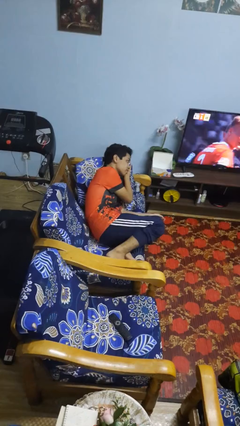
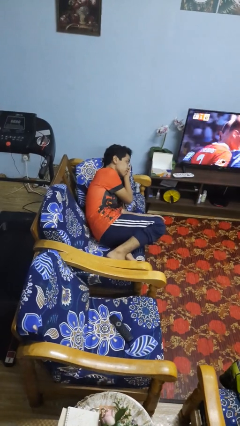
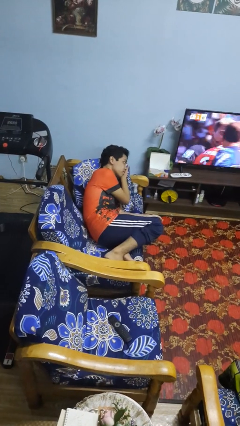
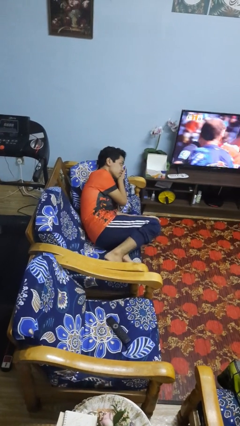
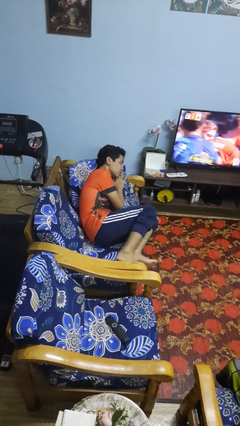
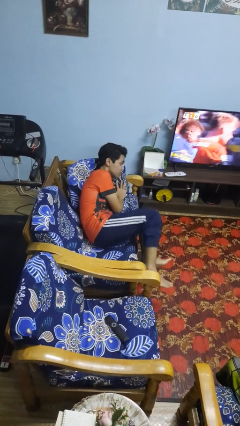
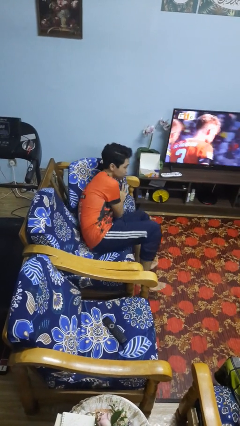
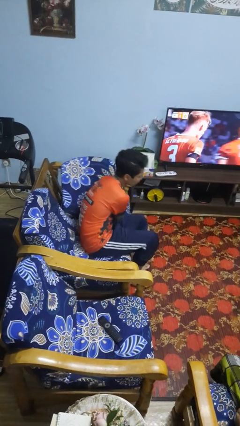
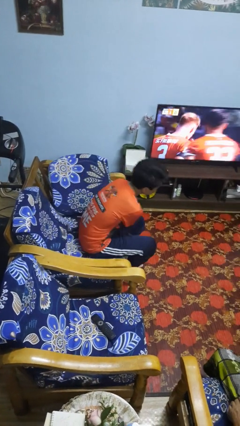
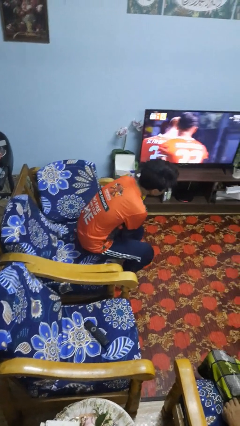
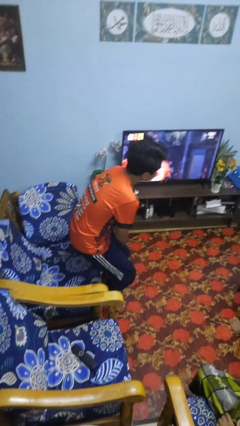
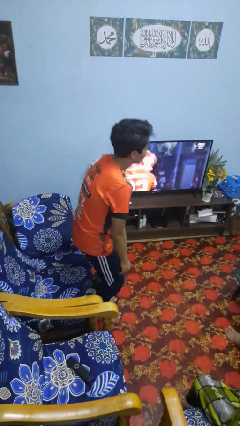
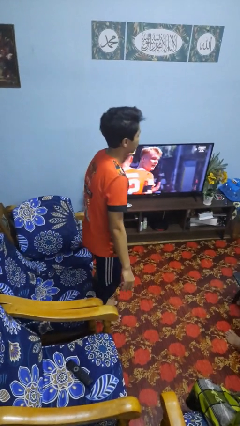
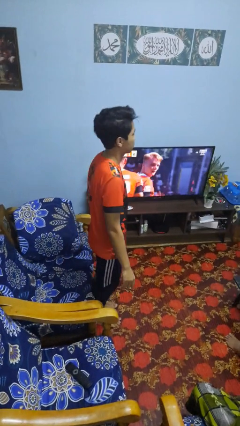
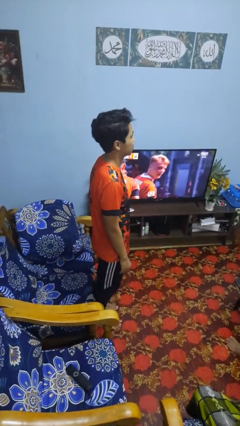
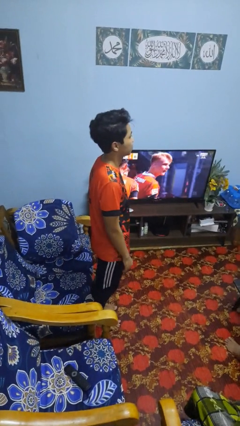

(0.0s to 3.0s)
person stands up

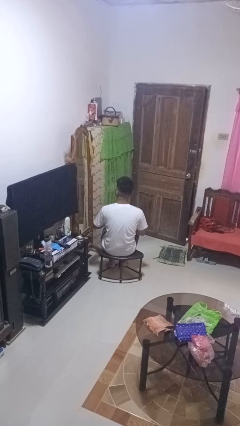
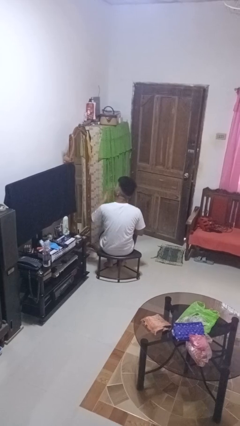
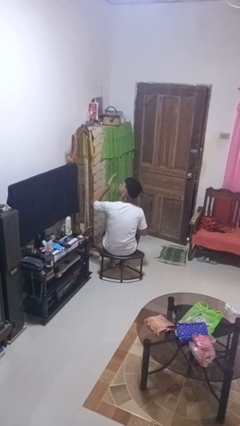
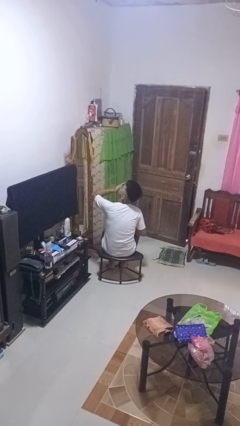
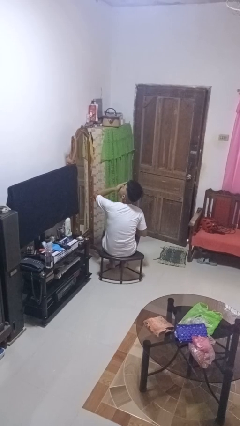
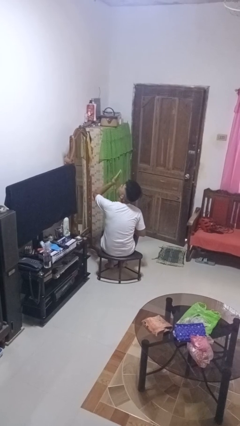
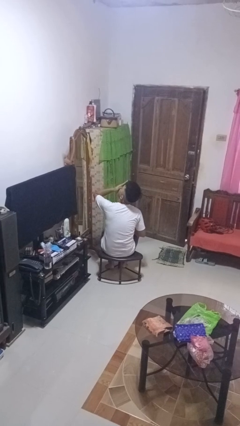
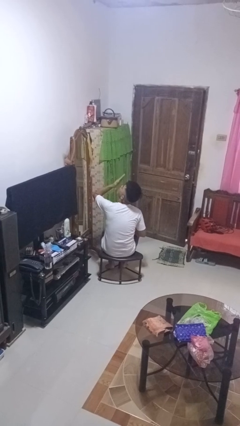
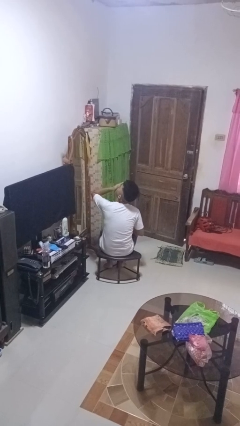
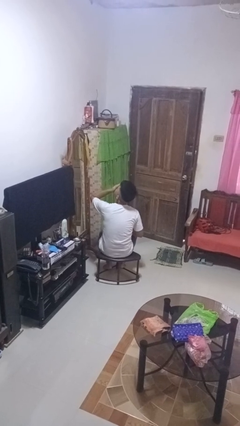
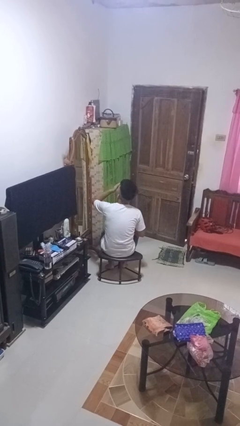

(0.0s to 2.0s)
person yawns

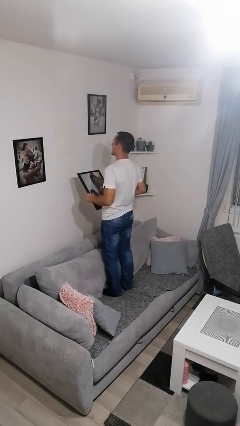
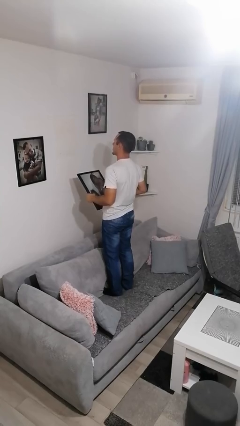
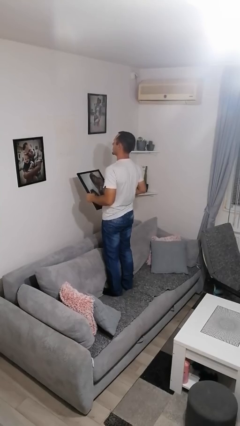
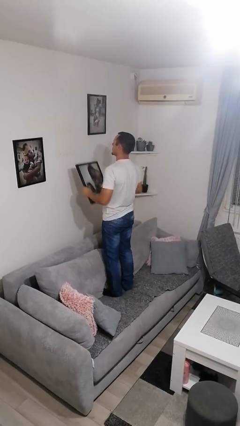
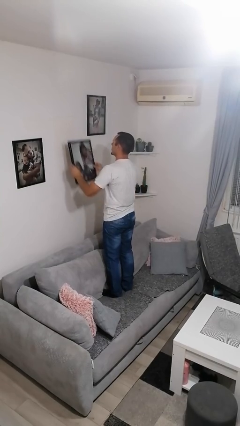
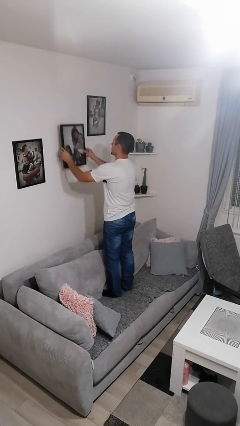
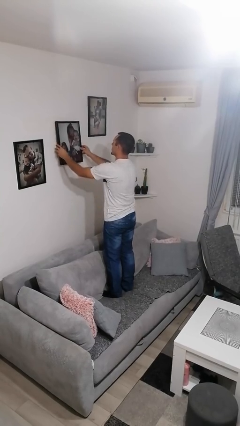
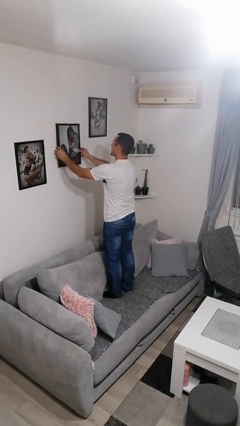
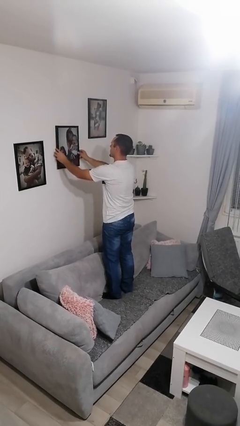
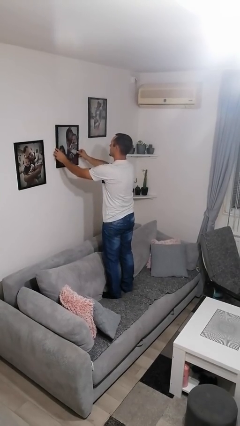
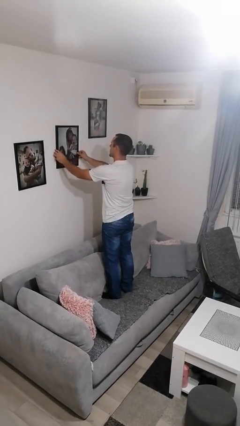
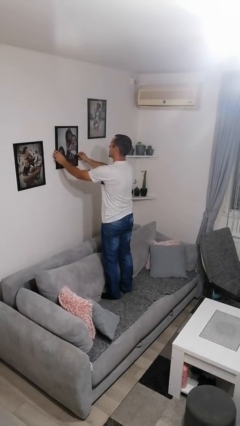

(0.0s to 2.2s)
person puts up picture frame

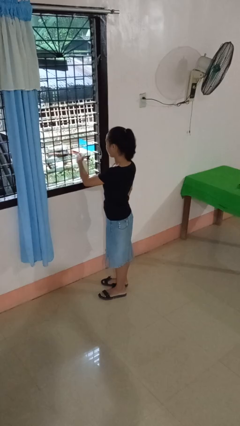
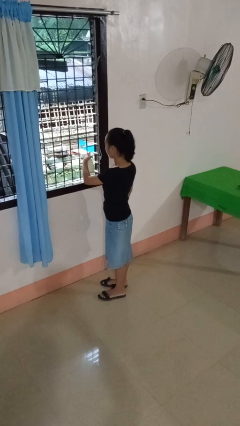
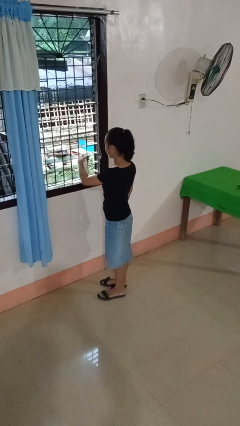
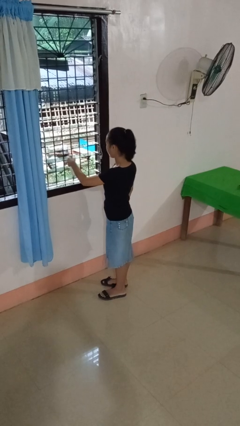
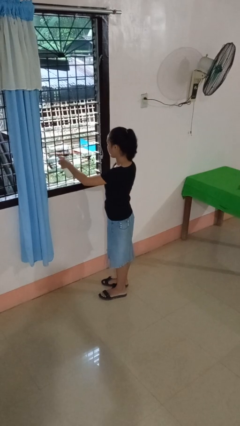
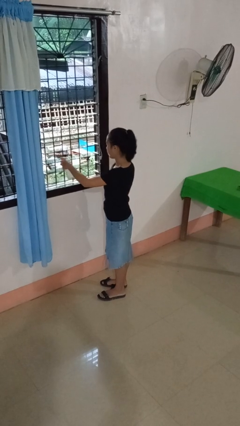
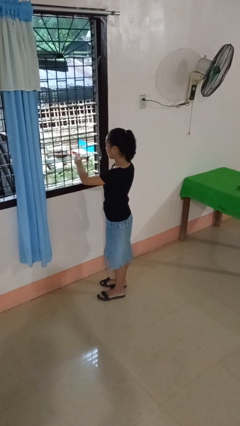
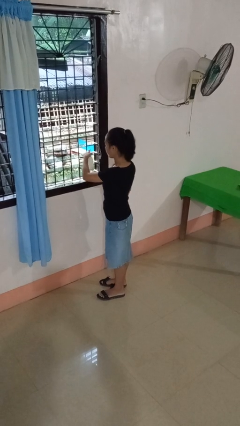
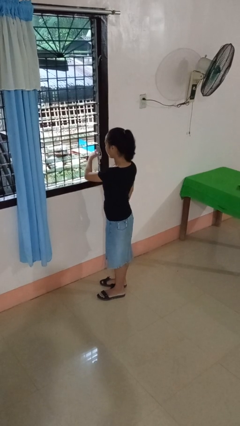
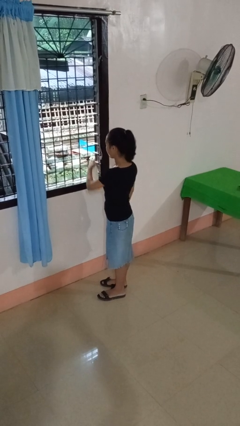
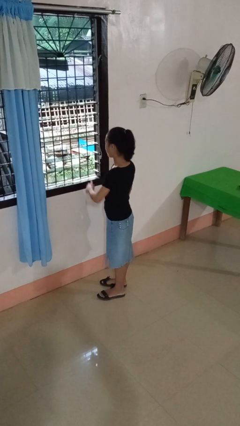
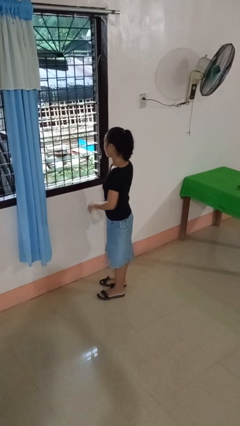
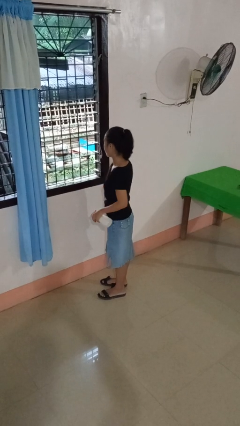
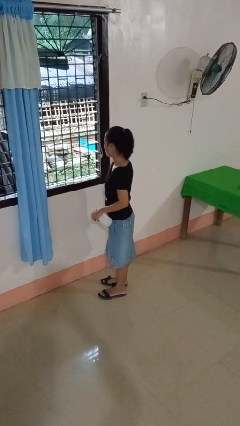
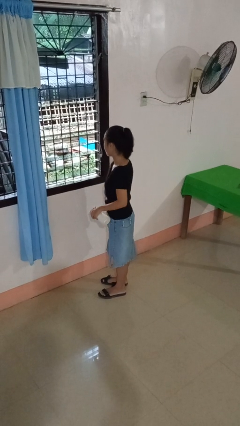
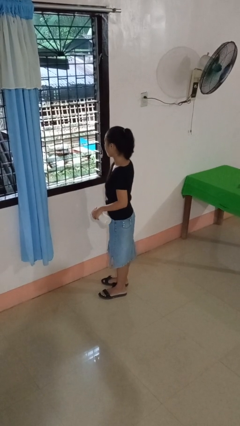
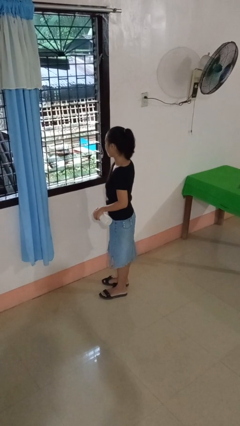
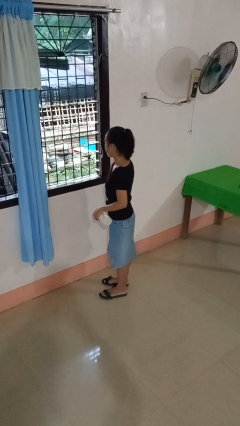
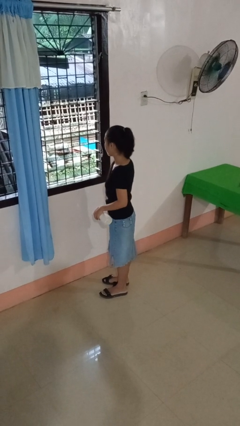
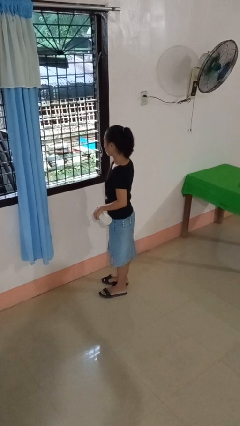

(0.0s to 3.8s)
person sprays from bottle

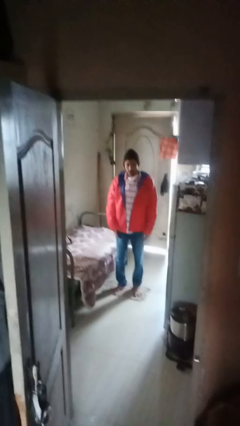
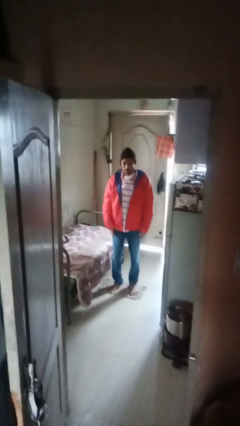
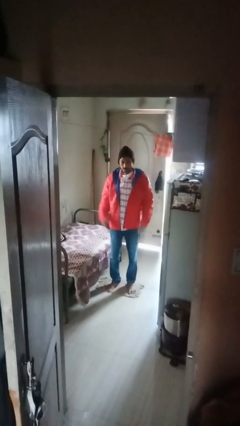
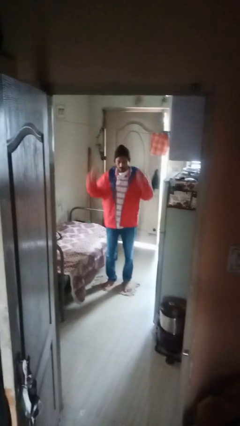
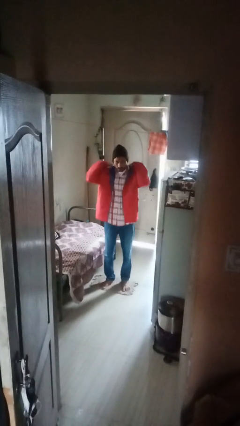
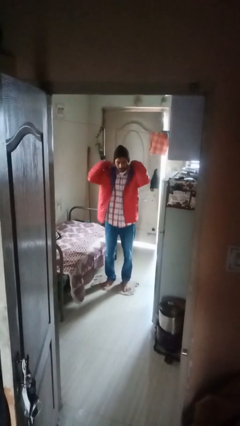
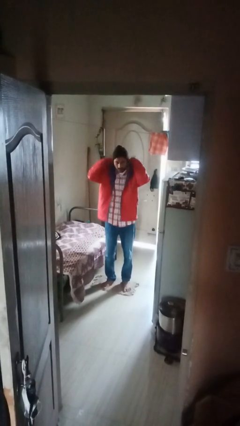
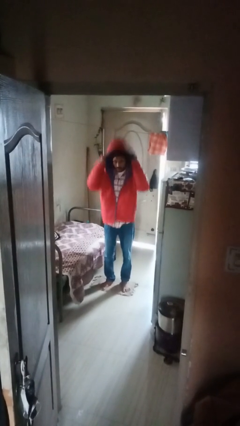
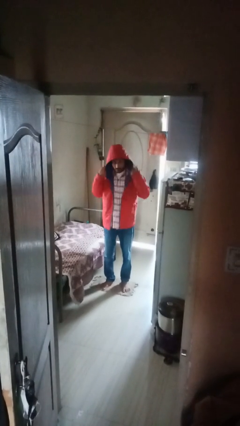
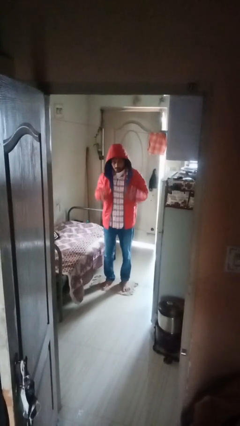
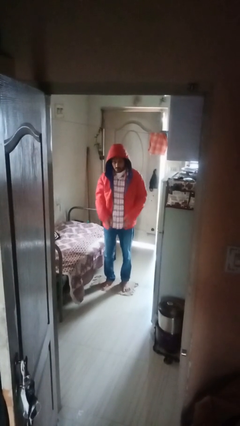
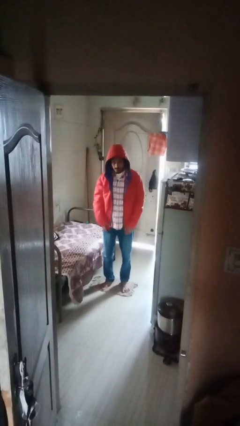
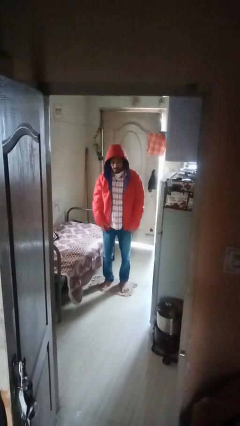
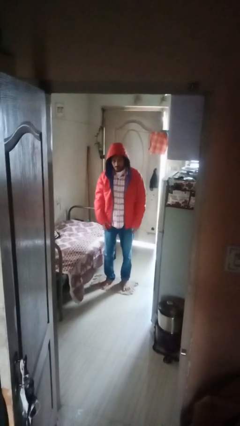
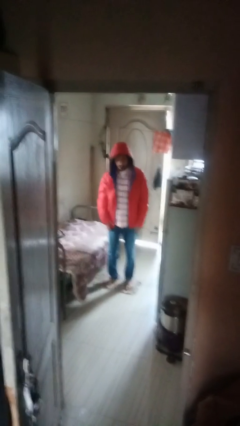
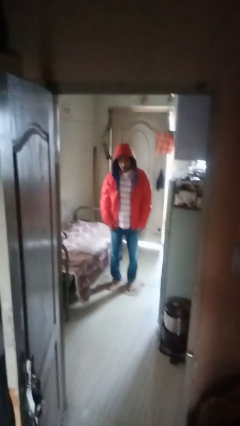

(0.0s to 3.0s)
person puts on hoodie

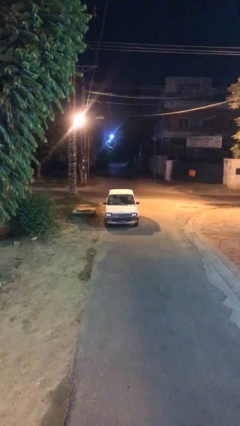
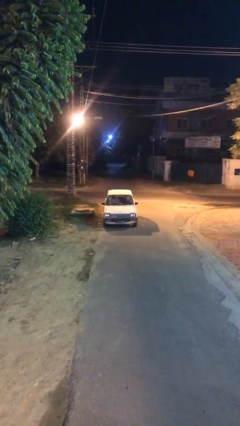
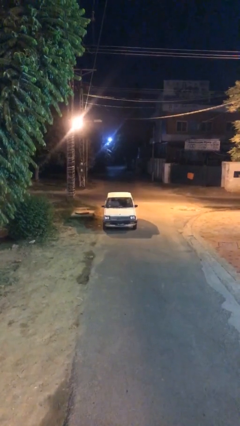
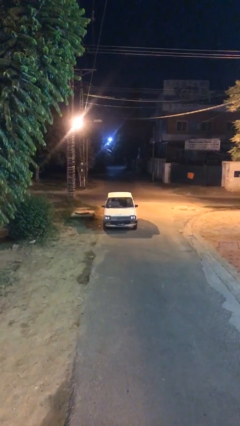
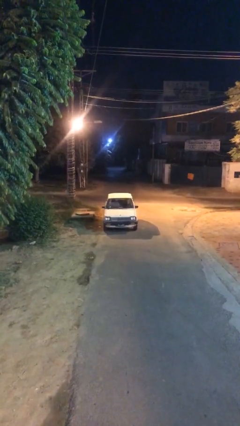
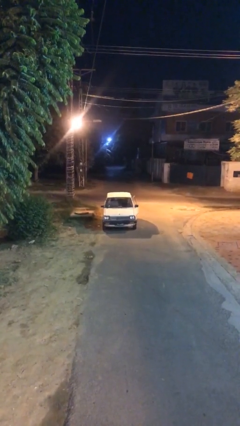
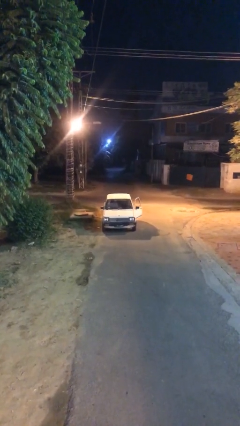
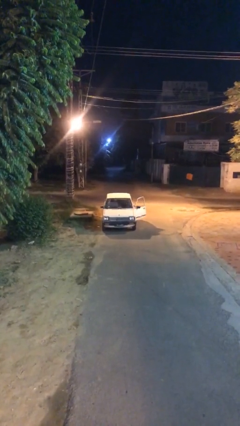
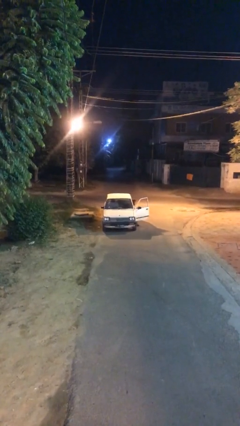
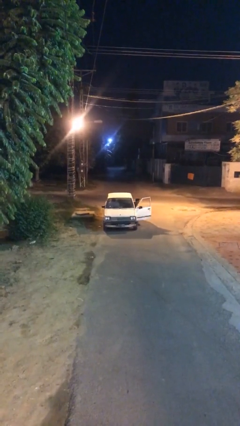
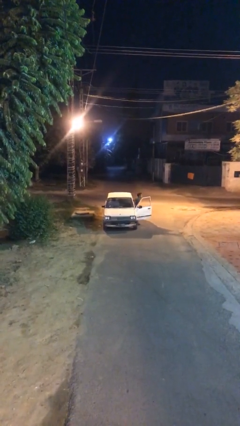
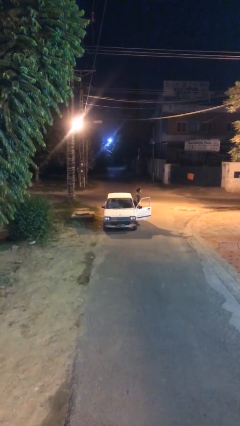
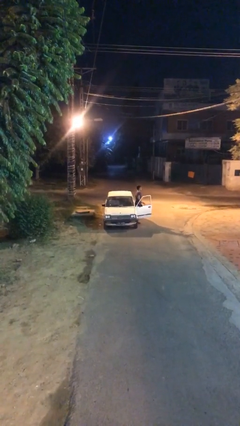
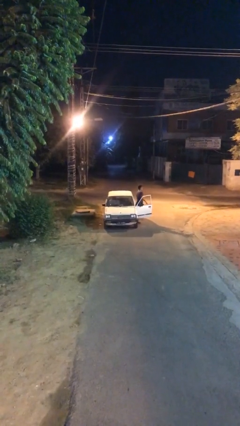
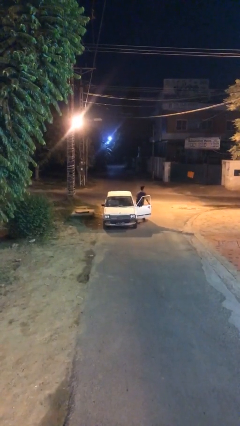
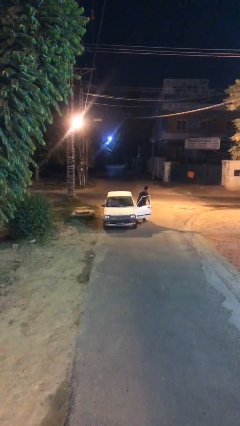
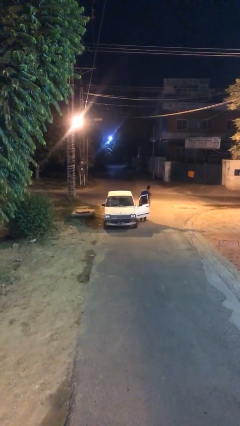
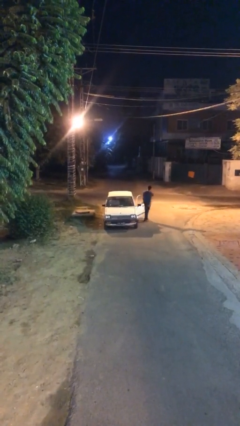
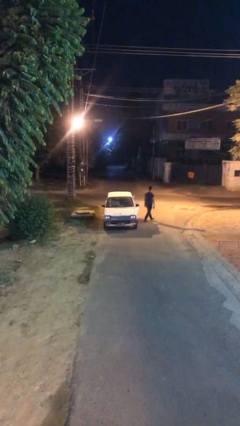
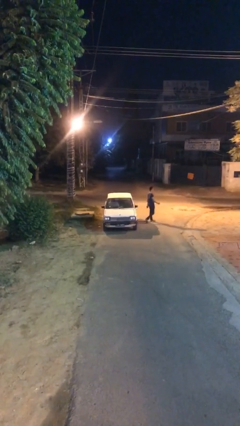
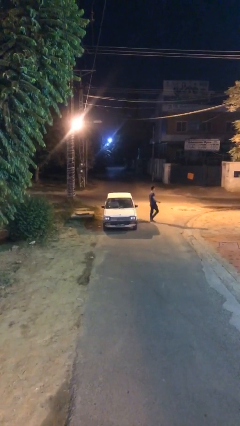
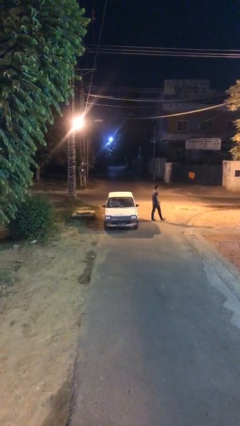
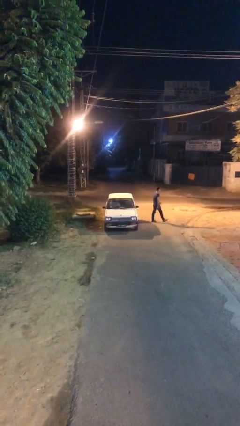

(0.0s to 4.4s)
car drops off person
